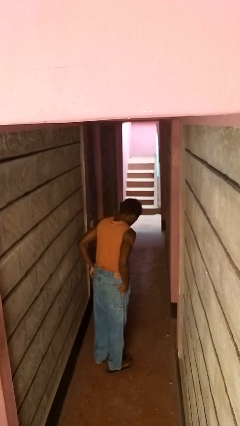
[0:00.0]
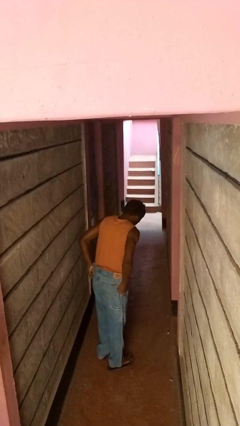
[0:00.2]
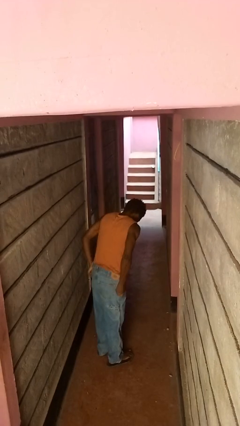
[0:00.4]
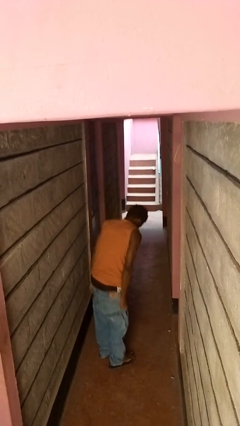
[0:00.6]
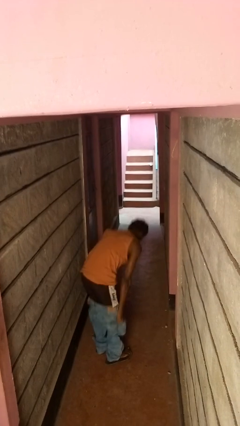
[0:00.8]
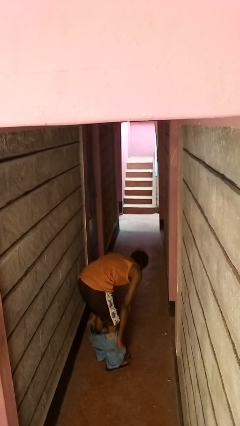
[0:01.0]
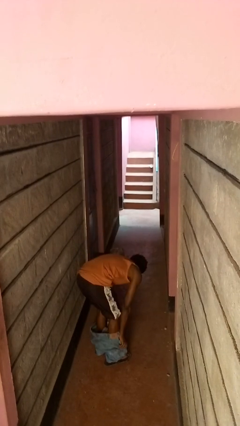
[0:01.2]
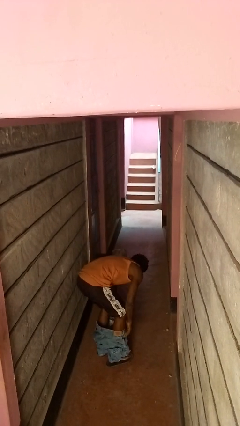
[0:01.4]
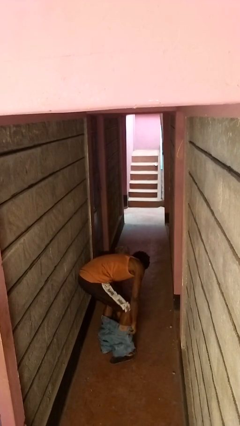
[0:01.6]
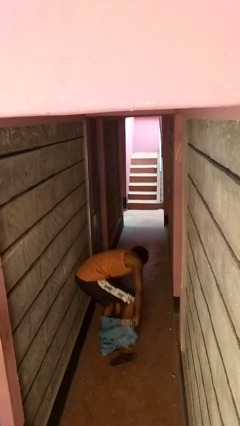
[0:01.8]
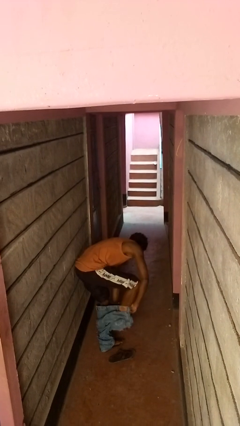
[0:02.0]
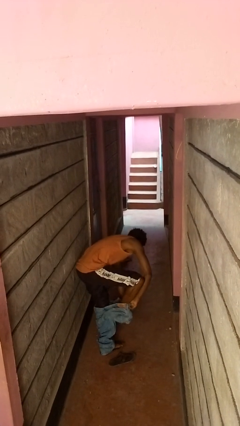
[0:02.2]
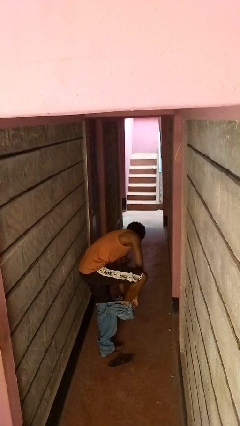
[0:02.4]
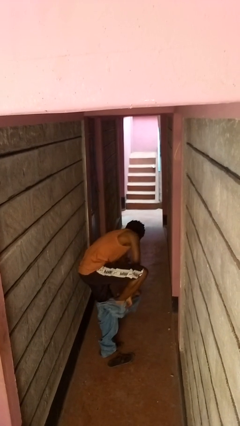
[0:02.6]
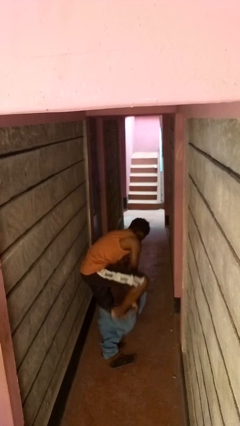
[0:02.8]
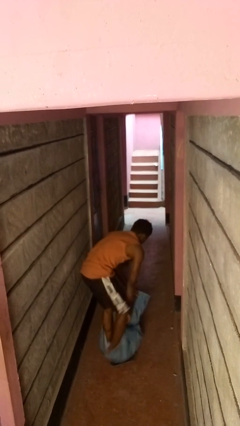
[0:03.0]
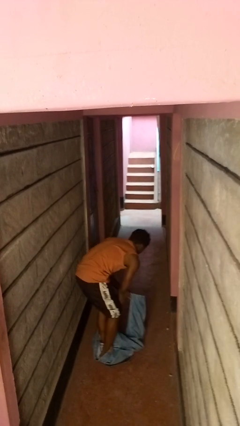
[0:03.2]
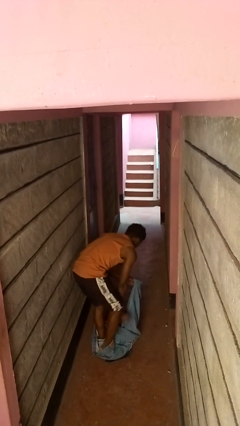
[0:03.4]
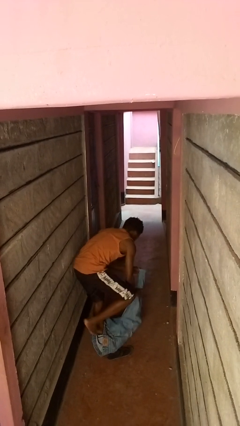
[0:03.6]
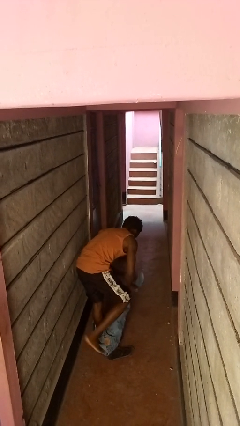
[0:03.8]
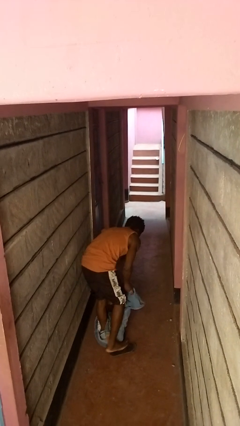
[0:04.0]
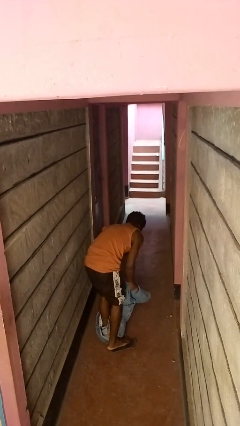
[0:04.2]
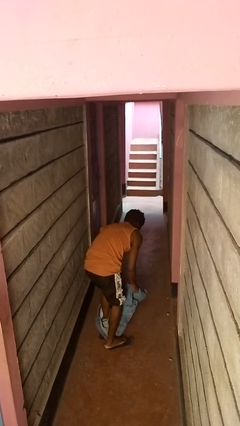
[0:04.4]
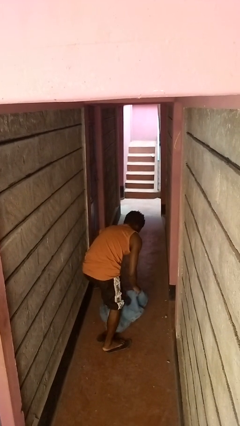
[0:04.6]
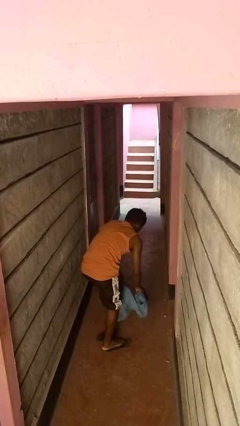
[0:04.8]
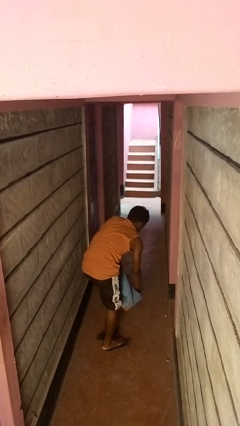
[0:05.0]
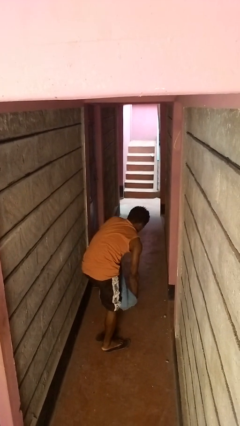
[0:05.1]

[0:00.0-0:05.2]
person takes off pants

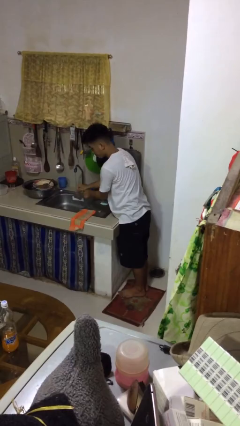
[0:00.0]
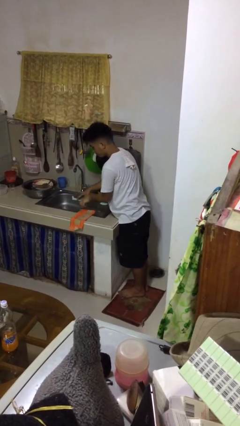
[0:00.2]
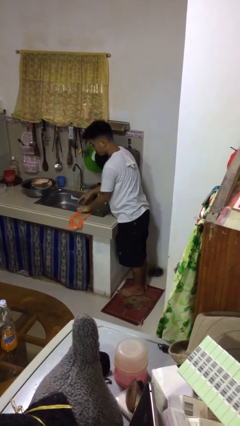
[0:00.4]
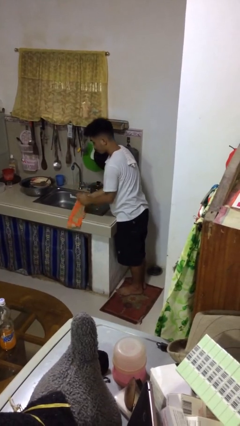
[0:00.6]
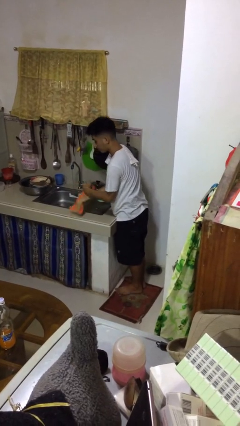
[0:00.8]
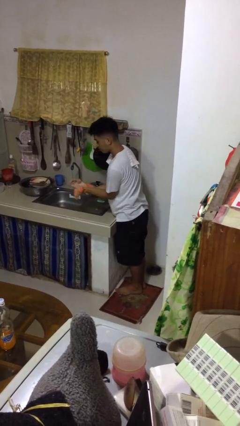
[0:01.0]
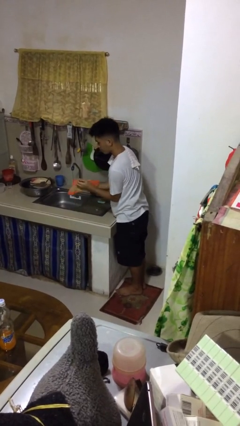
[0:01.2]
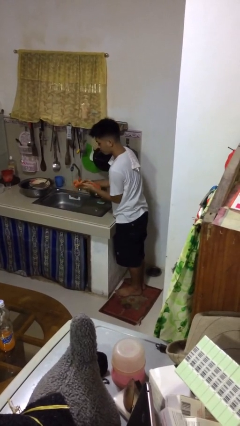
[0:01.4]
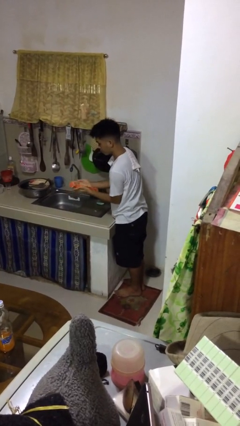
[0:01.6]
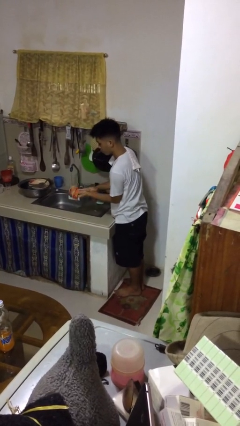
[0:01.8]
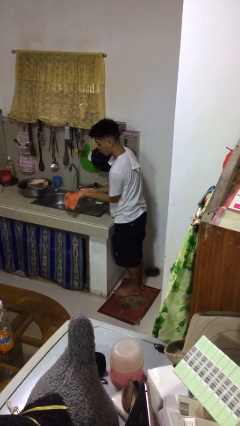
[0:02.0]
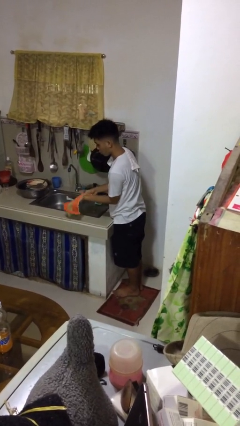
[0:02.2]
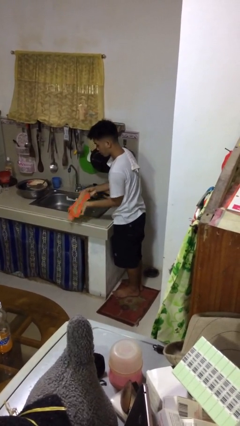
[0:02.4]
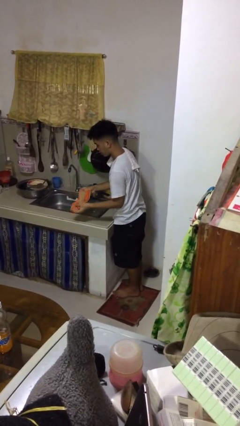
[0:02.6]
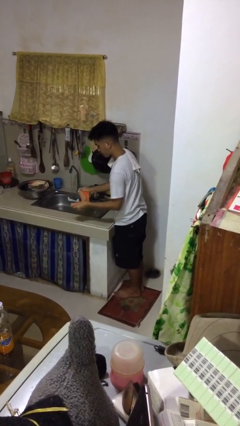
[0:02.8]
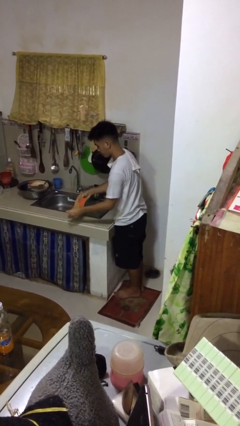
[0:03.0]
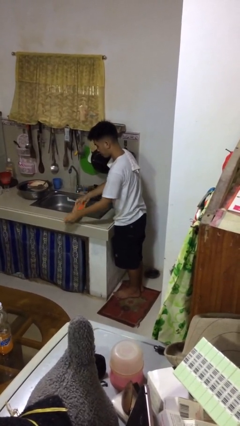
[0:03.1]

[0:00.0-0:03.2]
person dries hands with towel

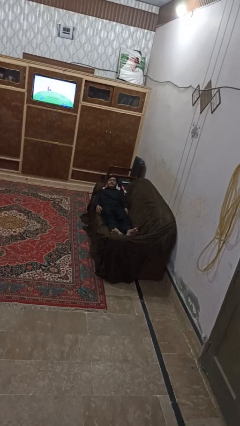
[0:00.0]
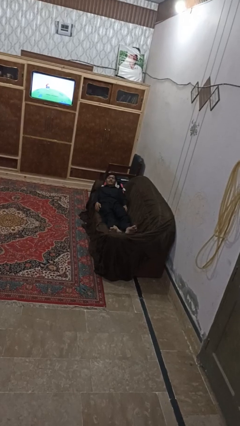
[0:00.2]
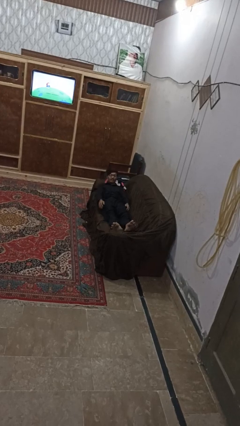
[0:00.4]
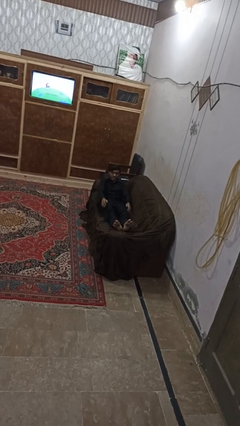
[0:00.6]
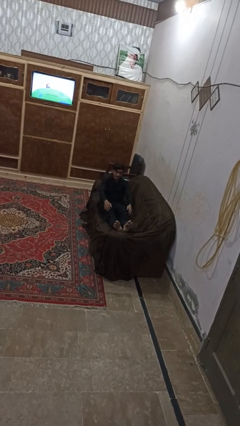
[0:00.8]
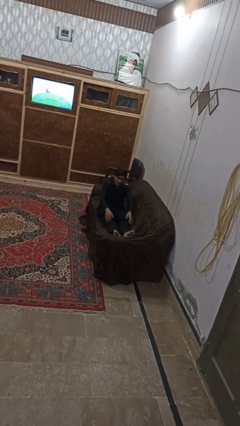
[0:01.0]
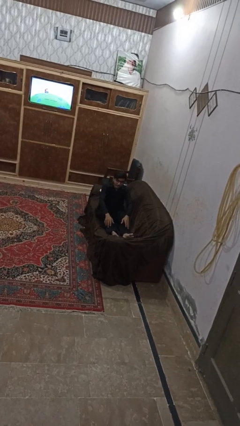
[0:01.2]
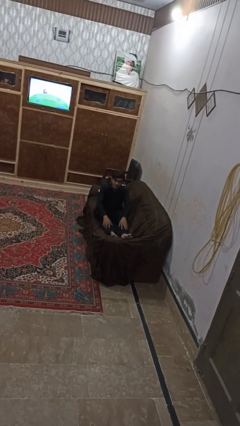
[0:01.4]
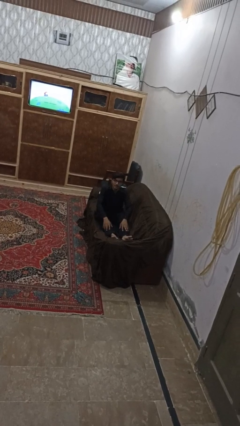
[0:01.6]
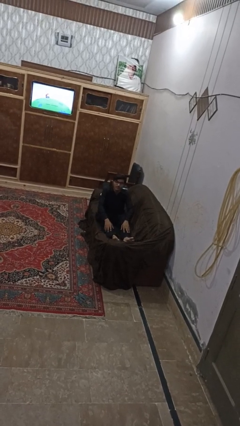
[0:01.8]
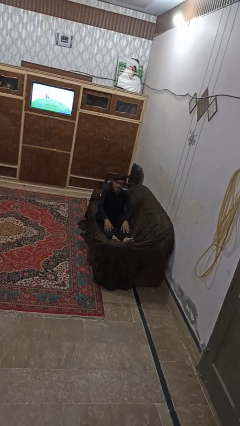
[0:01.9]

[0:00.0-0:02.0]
person stands up

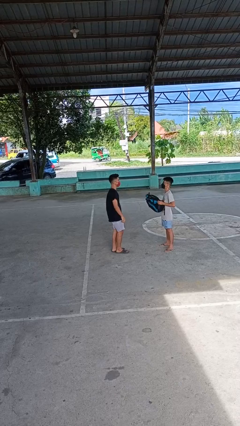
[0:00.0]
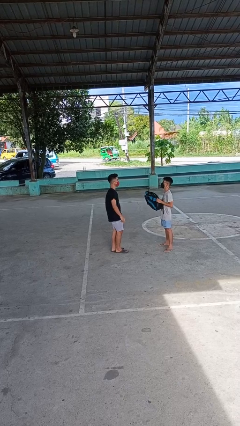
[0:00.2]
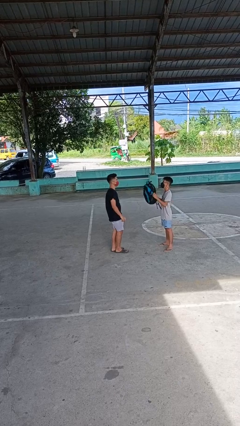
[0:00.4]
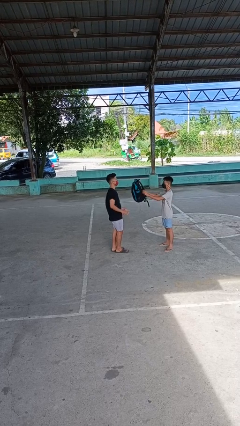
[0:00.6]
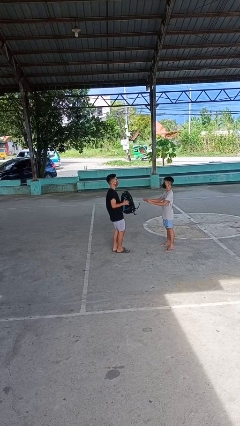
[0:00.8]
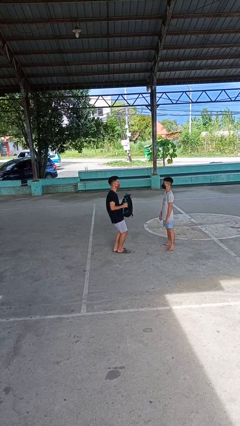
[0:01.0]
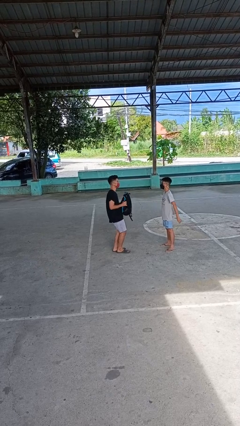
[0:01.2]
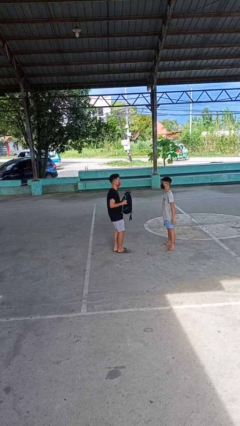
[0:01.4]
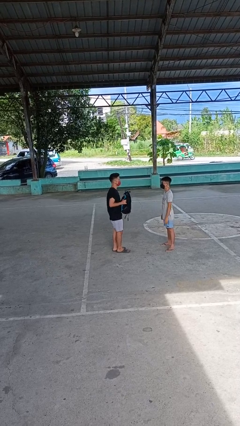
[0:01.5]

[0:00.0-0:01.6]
person catches object from person

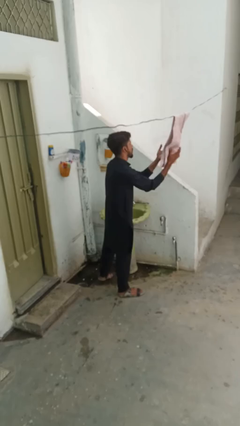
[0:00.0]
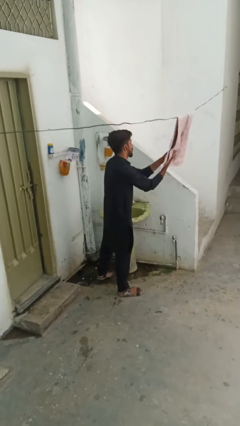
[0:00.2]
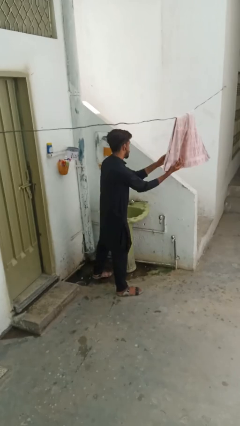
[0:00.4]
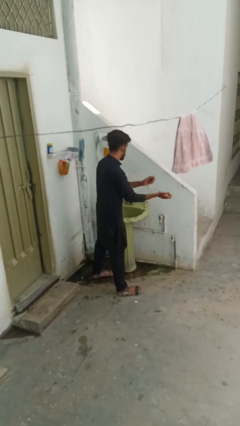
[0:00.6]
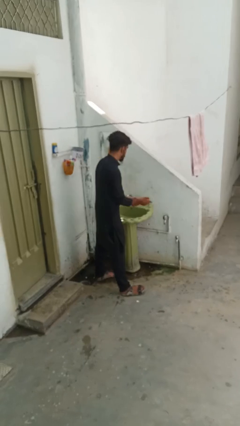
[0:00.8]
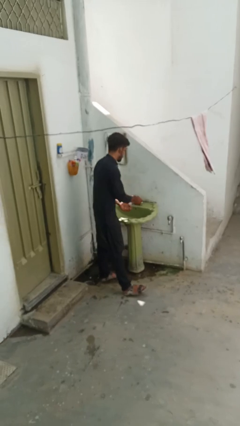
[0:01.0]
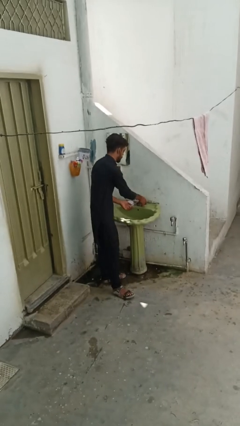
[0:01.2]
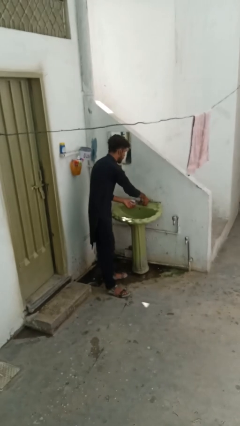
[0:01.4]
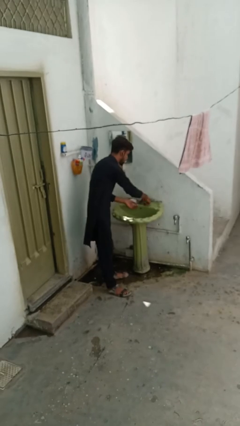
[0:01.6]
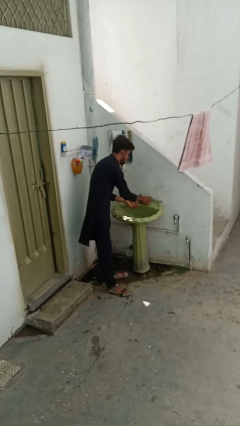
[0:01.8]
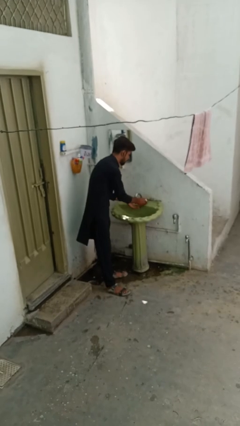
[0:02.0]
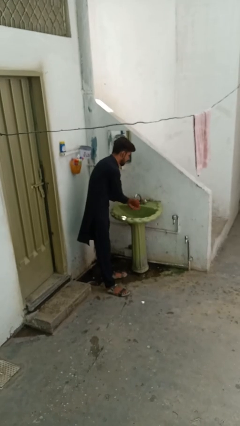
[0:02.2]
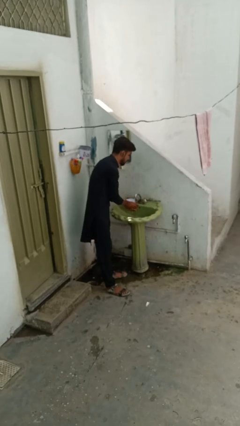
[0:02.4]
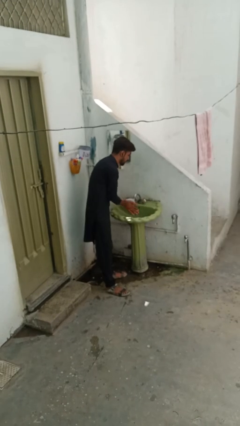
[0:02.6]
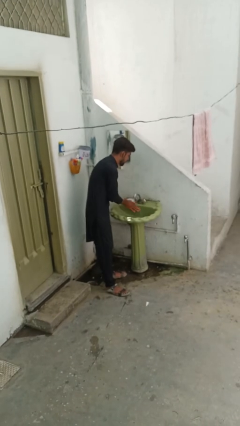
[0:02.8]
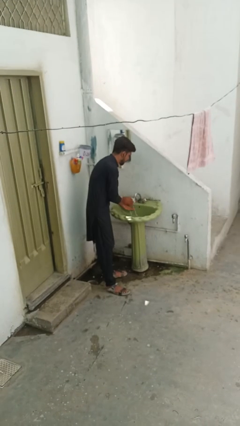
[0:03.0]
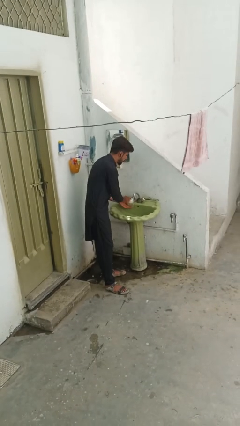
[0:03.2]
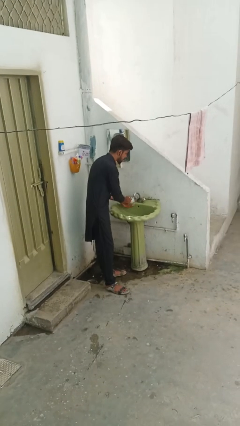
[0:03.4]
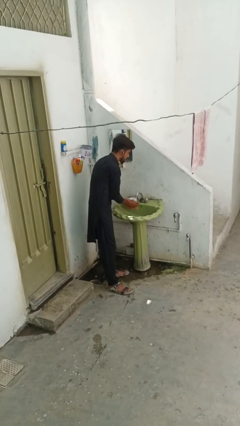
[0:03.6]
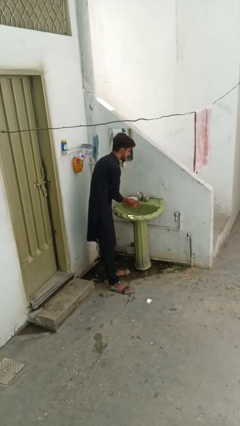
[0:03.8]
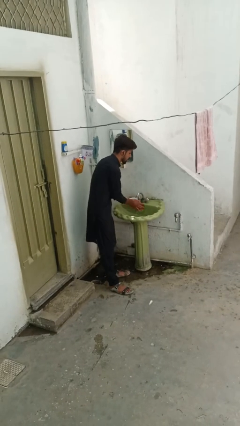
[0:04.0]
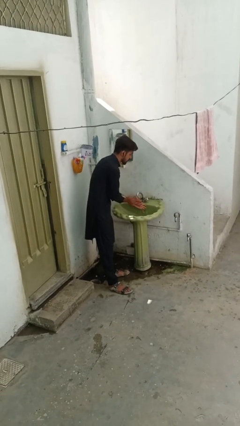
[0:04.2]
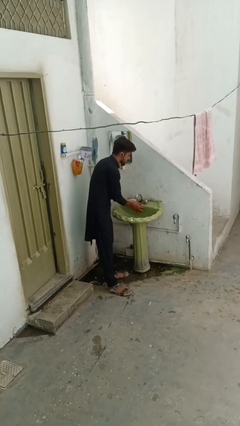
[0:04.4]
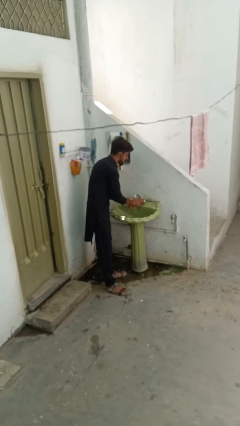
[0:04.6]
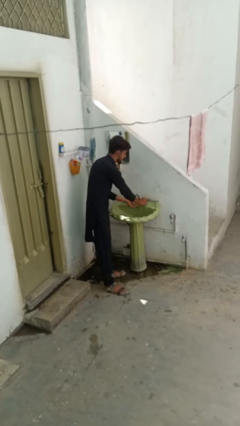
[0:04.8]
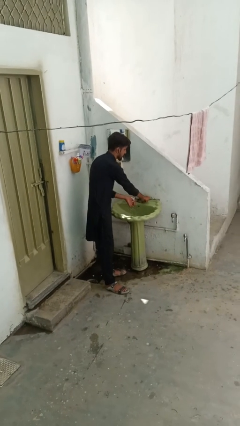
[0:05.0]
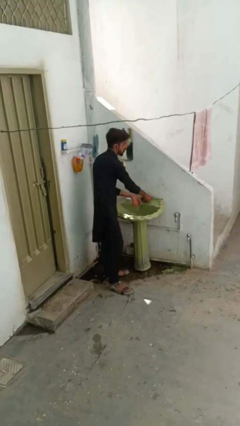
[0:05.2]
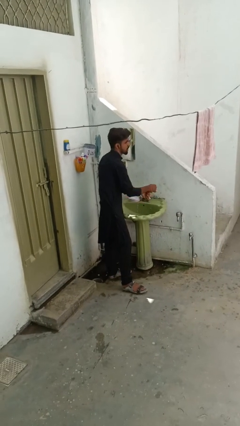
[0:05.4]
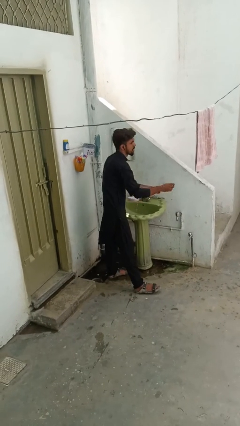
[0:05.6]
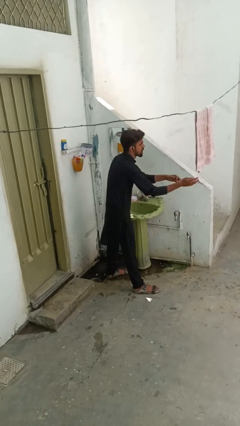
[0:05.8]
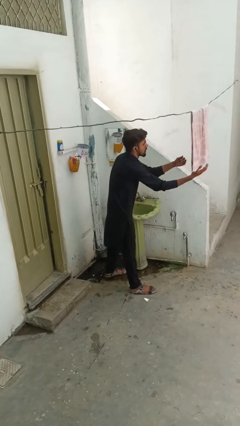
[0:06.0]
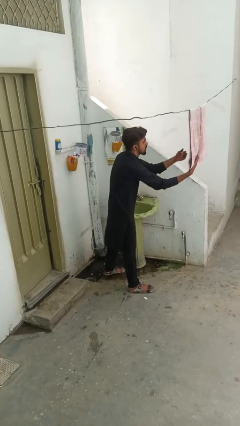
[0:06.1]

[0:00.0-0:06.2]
person washes hands
